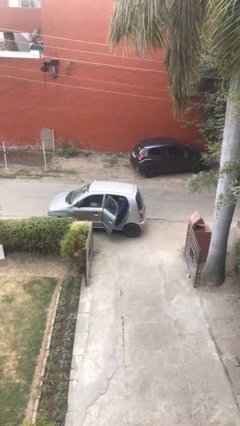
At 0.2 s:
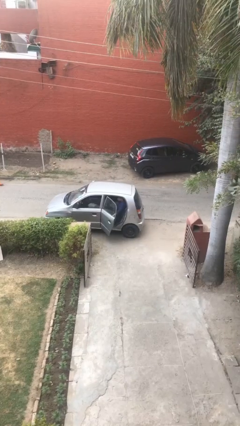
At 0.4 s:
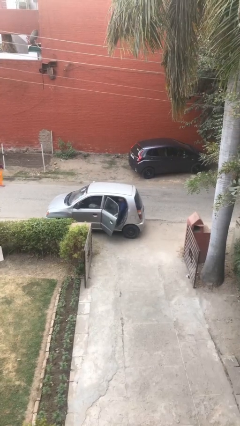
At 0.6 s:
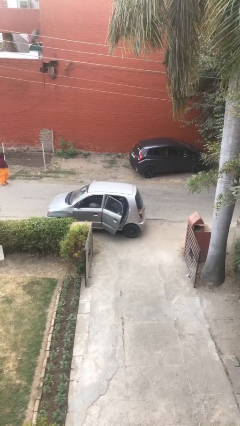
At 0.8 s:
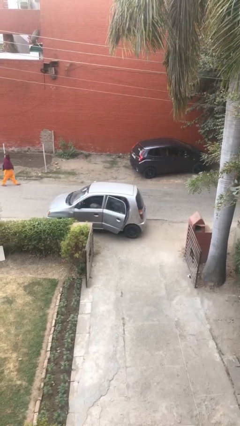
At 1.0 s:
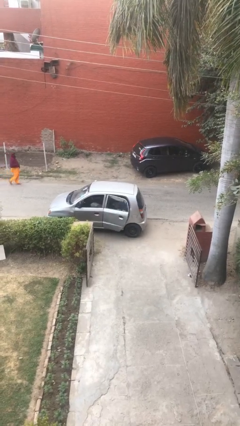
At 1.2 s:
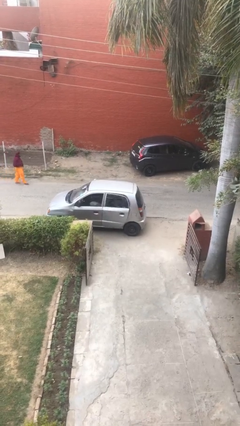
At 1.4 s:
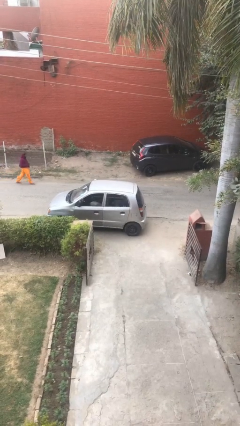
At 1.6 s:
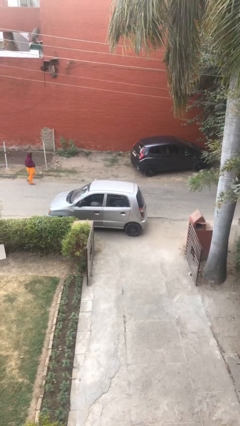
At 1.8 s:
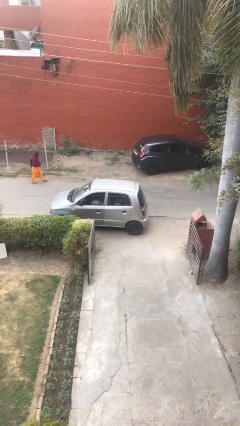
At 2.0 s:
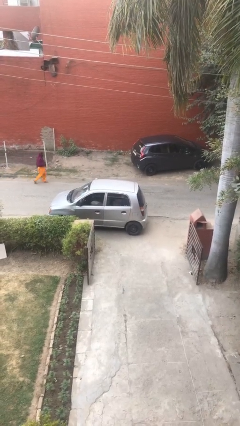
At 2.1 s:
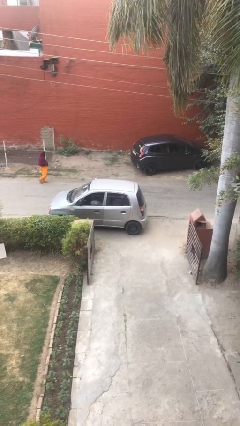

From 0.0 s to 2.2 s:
person closes car door

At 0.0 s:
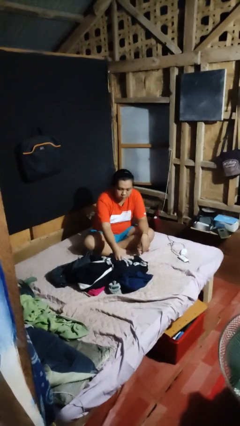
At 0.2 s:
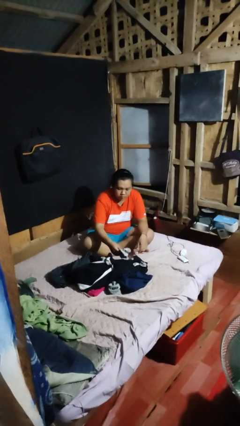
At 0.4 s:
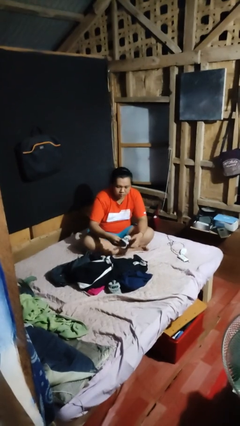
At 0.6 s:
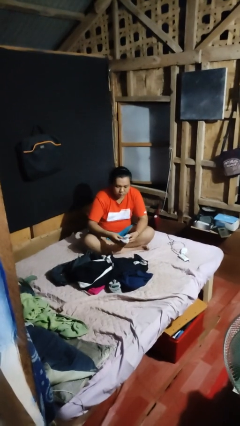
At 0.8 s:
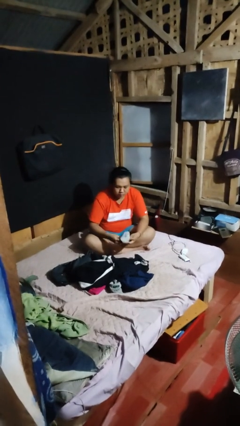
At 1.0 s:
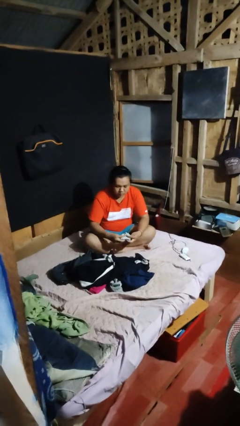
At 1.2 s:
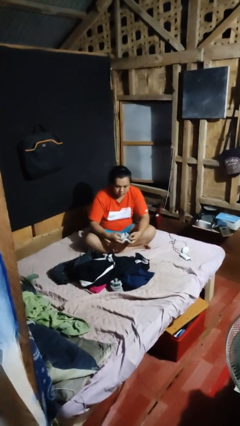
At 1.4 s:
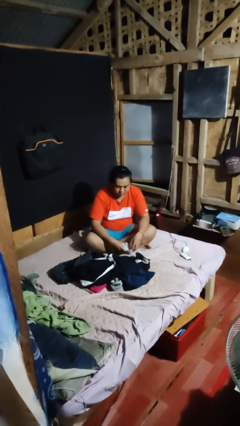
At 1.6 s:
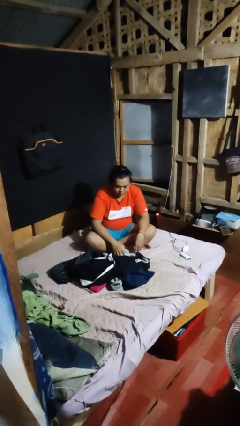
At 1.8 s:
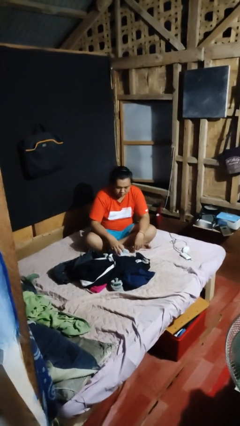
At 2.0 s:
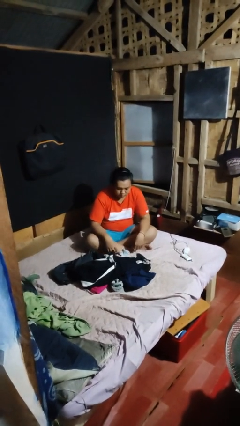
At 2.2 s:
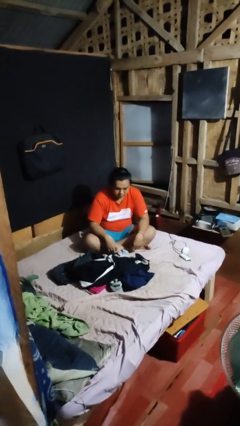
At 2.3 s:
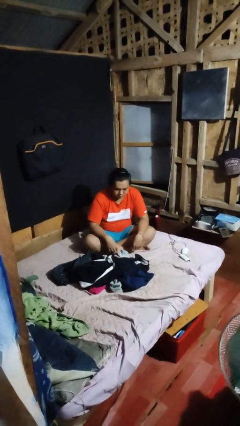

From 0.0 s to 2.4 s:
person folds socks

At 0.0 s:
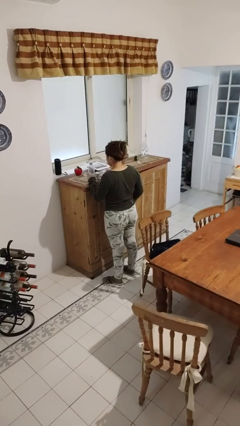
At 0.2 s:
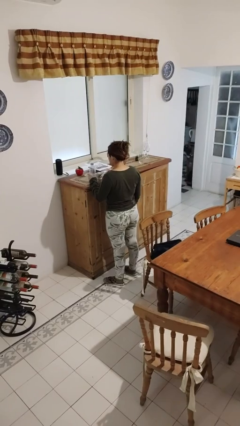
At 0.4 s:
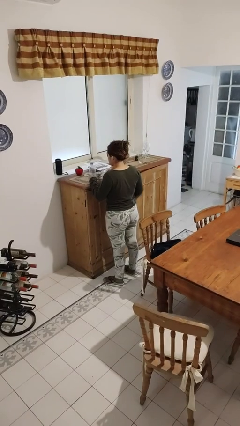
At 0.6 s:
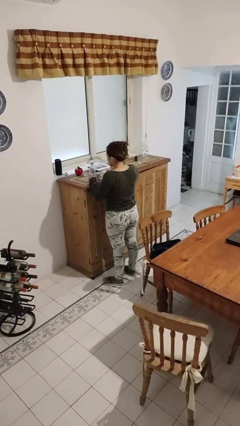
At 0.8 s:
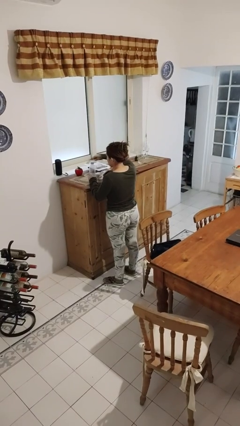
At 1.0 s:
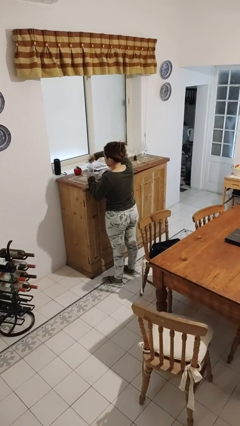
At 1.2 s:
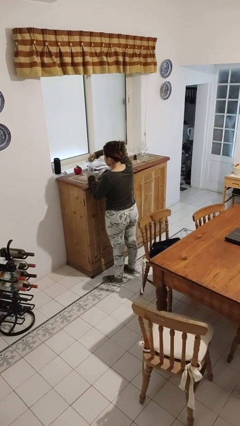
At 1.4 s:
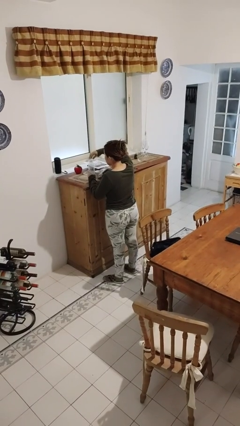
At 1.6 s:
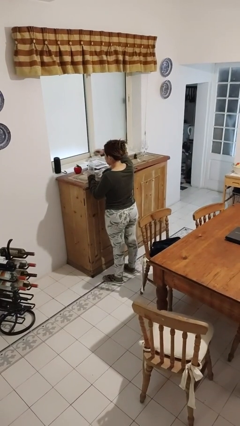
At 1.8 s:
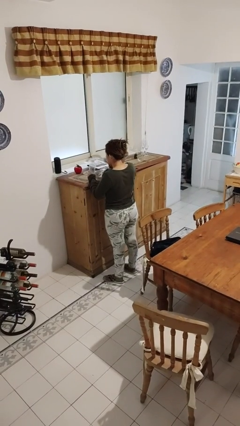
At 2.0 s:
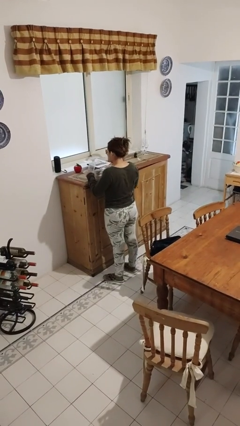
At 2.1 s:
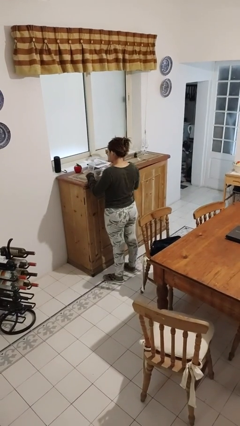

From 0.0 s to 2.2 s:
person unscrews lid from bottle

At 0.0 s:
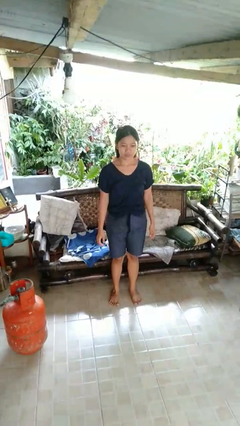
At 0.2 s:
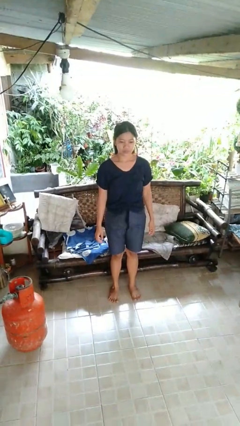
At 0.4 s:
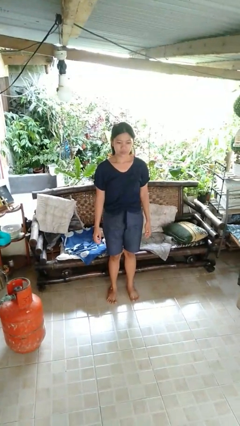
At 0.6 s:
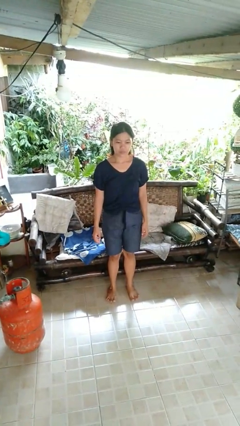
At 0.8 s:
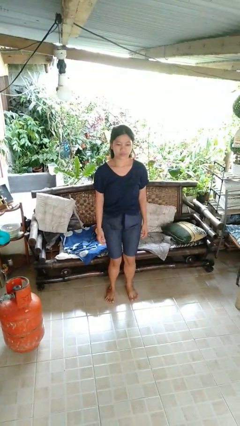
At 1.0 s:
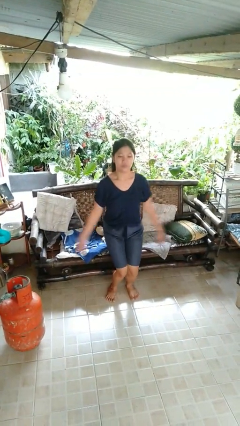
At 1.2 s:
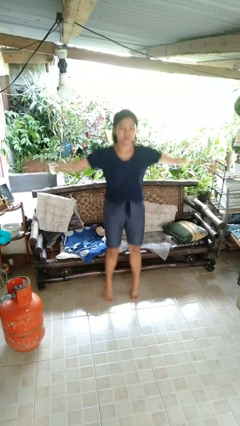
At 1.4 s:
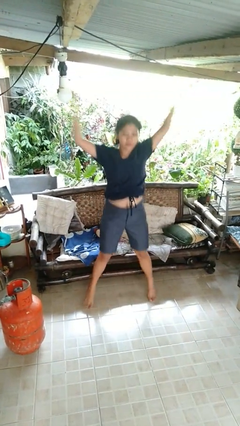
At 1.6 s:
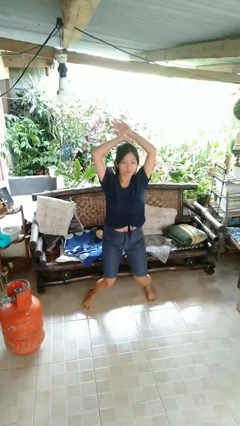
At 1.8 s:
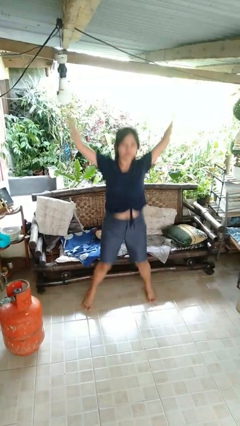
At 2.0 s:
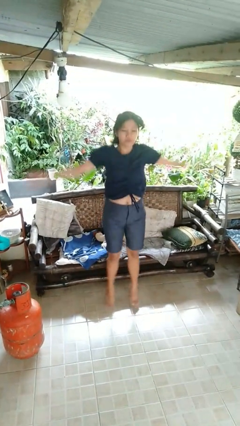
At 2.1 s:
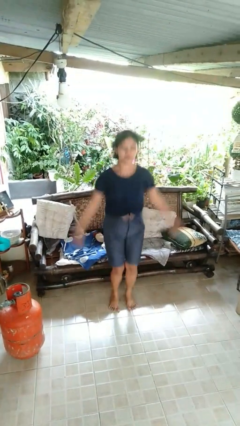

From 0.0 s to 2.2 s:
person exercises with jumping jacks

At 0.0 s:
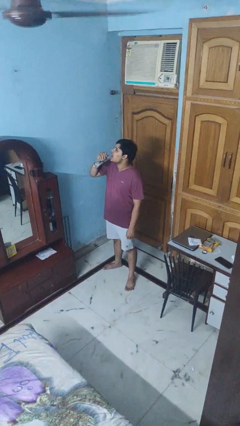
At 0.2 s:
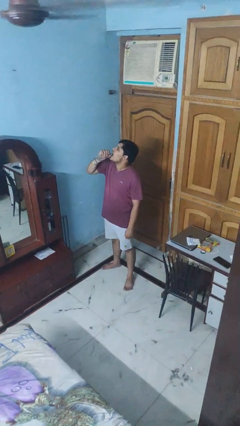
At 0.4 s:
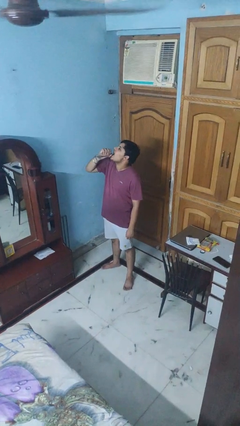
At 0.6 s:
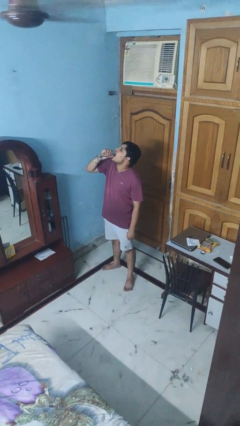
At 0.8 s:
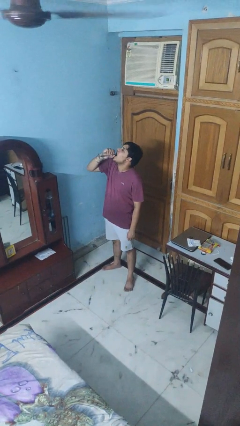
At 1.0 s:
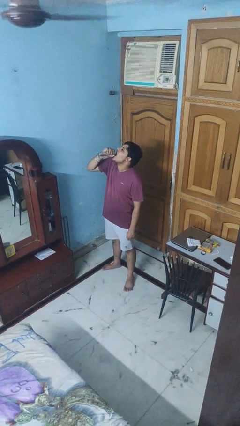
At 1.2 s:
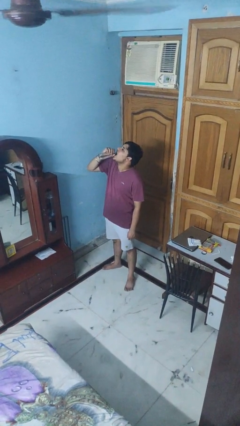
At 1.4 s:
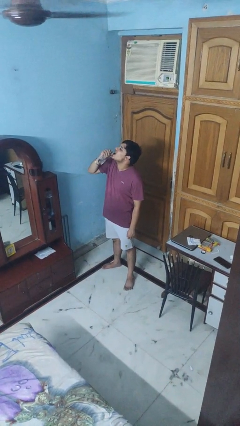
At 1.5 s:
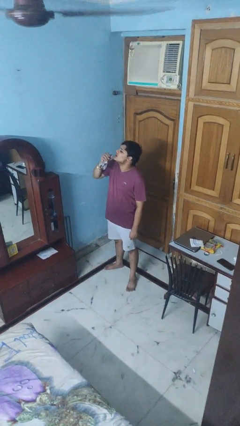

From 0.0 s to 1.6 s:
person drinks from bottle

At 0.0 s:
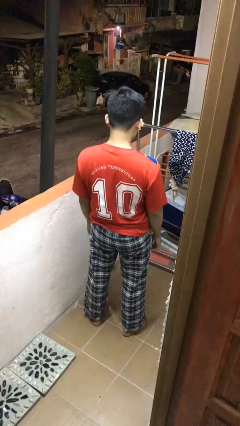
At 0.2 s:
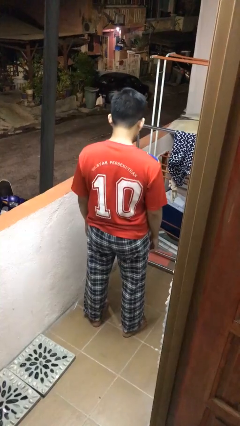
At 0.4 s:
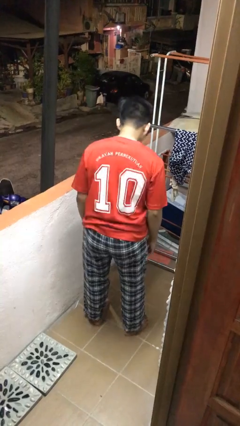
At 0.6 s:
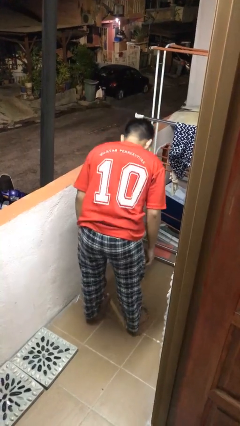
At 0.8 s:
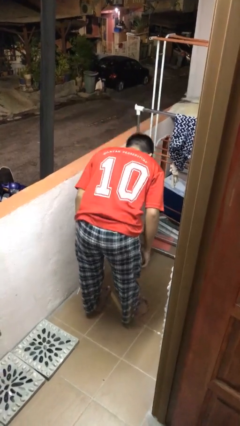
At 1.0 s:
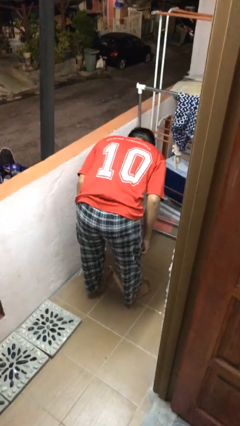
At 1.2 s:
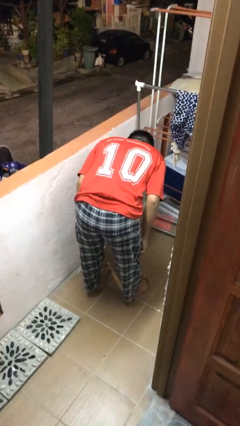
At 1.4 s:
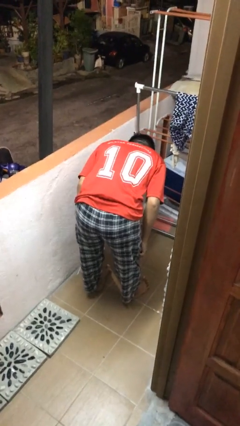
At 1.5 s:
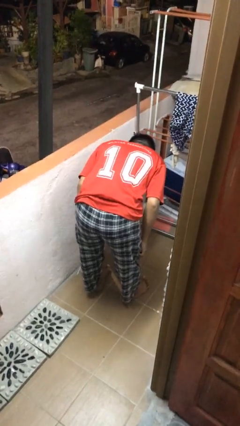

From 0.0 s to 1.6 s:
person bows

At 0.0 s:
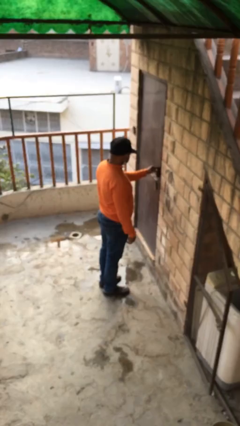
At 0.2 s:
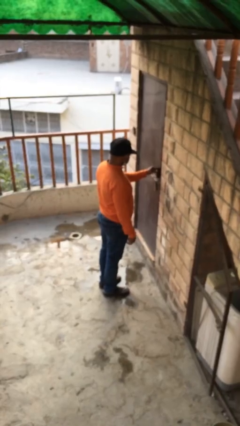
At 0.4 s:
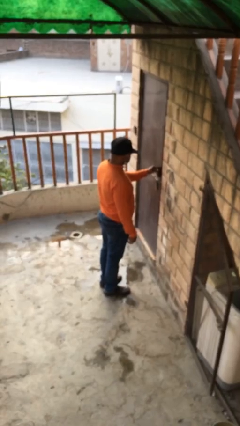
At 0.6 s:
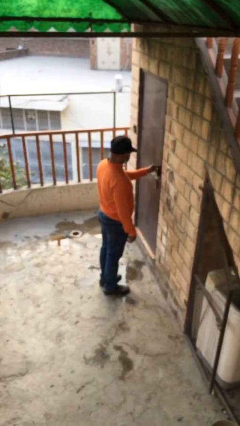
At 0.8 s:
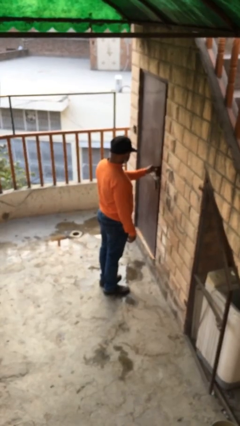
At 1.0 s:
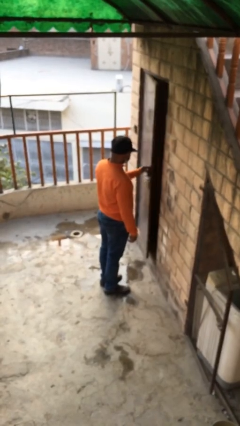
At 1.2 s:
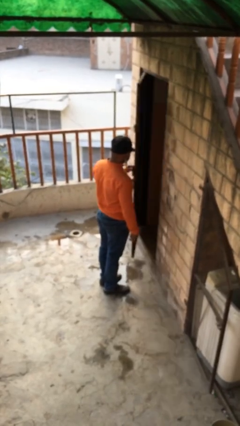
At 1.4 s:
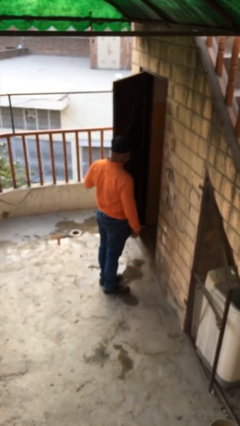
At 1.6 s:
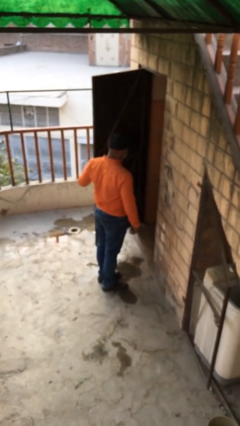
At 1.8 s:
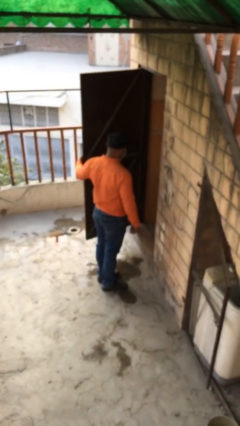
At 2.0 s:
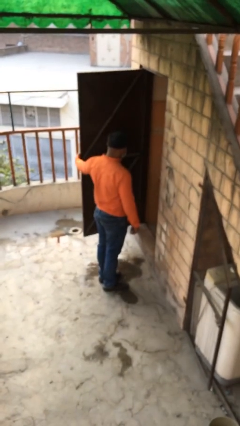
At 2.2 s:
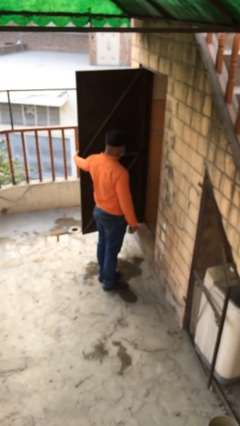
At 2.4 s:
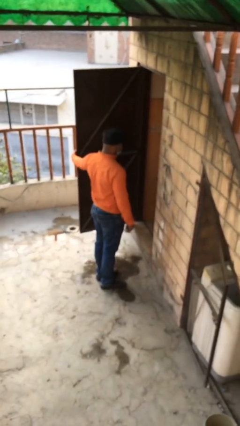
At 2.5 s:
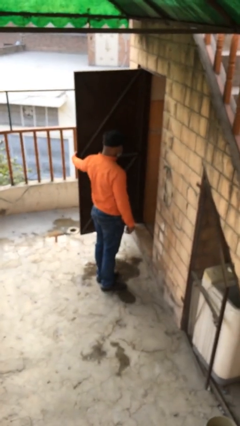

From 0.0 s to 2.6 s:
person opens facility door

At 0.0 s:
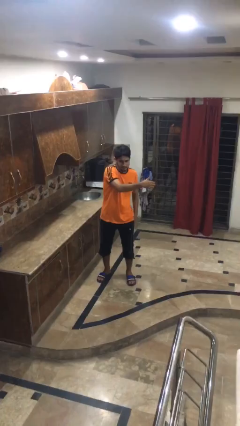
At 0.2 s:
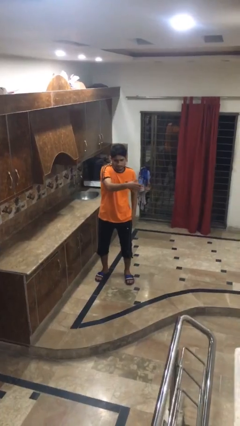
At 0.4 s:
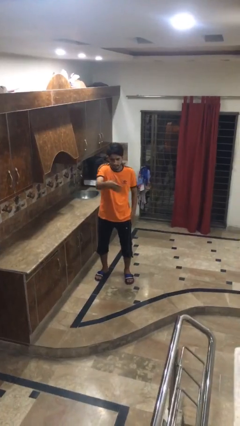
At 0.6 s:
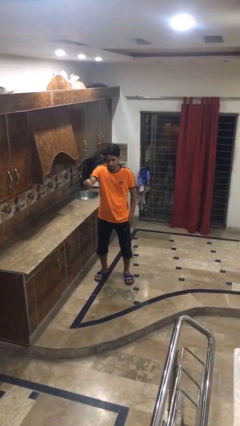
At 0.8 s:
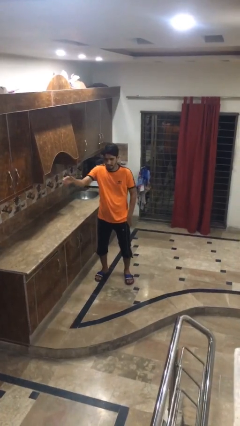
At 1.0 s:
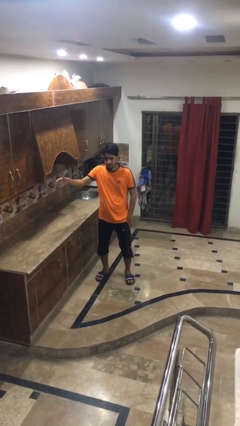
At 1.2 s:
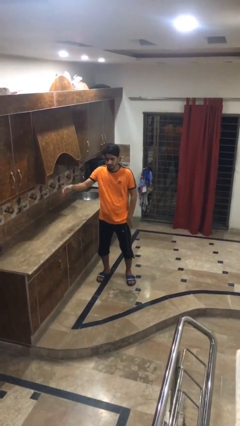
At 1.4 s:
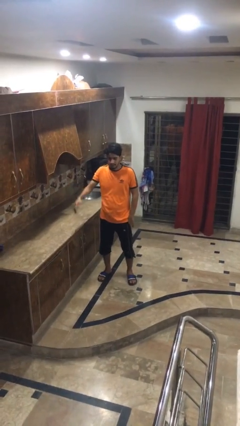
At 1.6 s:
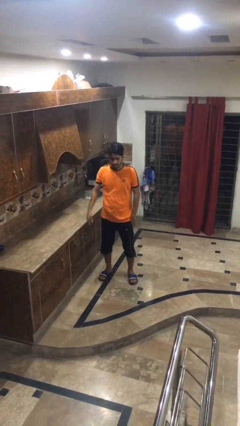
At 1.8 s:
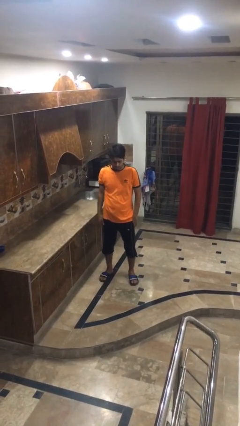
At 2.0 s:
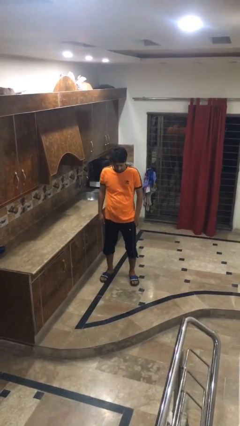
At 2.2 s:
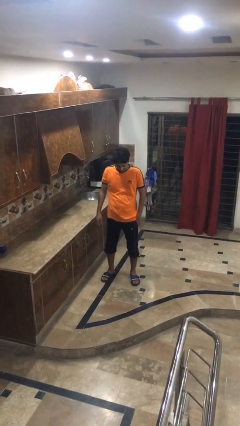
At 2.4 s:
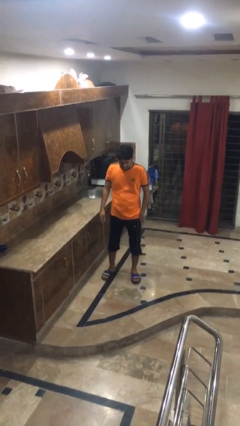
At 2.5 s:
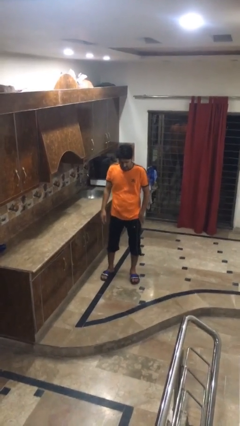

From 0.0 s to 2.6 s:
person gestures swipe right
